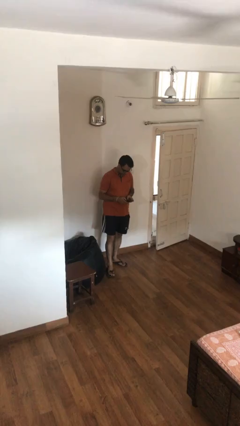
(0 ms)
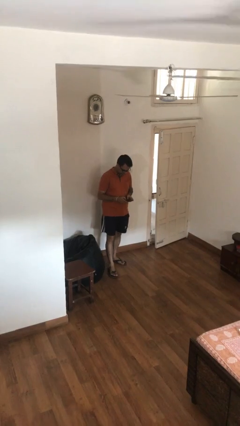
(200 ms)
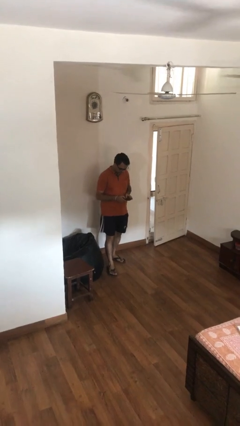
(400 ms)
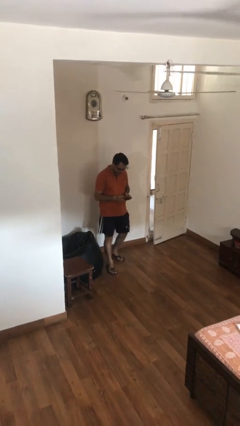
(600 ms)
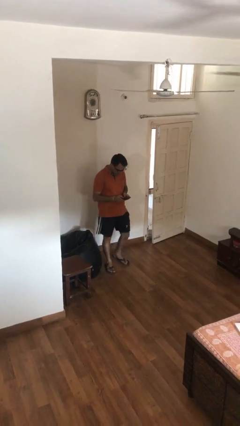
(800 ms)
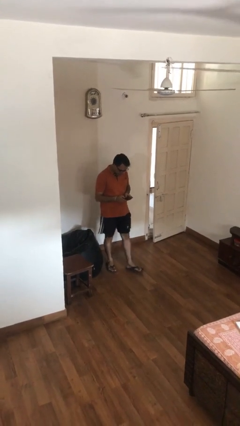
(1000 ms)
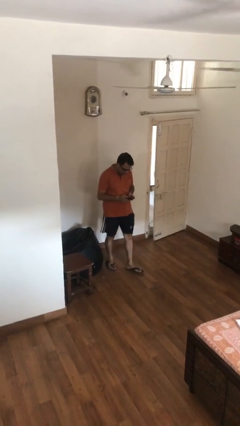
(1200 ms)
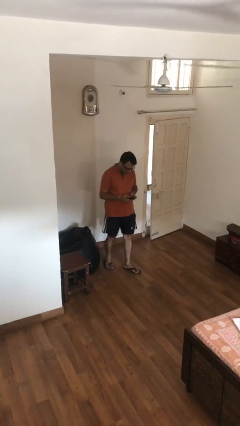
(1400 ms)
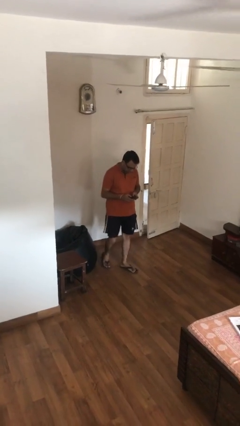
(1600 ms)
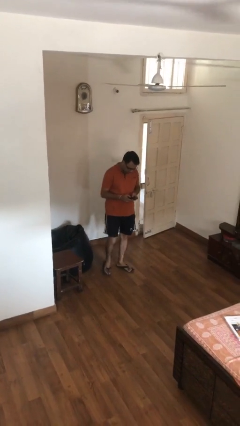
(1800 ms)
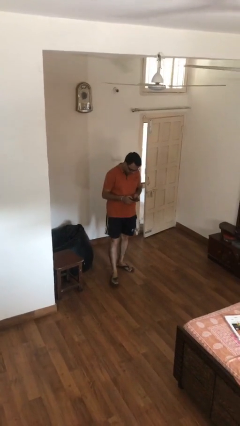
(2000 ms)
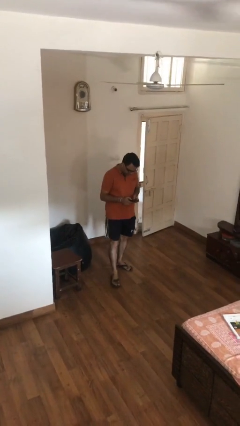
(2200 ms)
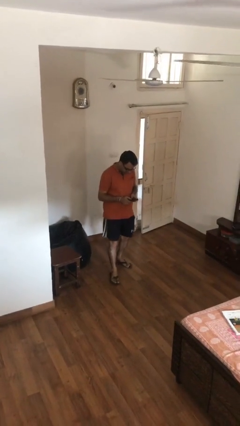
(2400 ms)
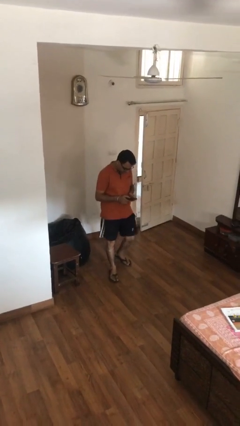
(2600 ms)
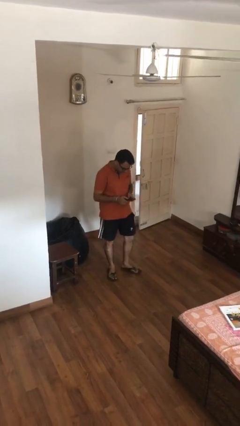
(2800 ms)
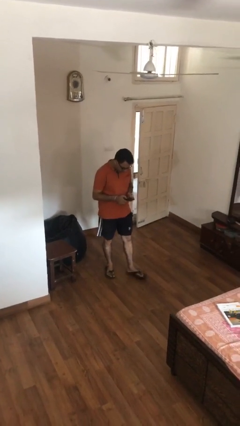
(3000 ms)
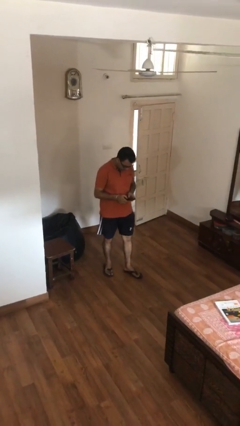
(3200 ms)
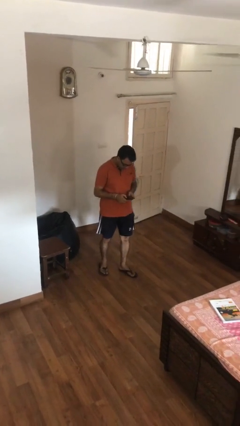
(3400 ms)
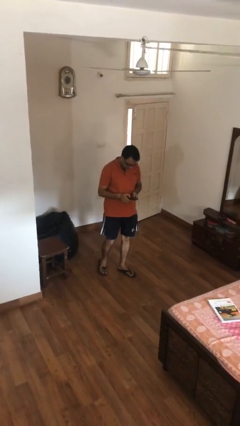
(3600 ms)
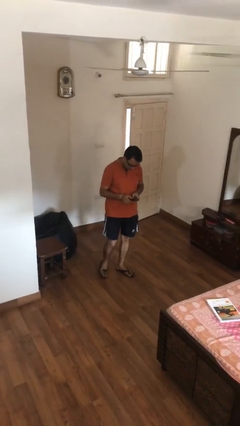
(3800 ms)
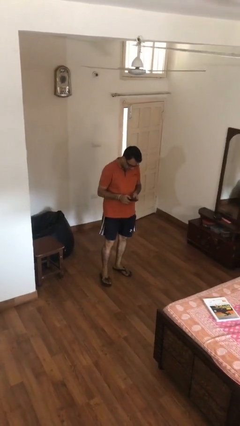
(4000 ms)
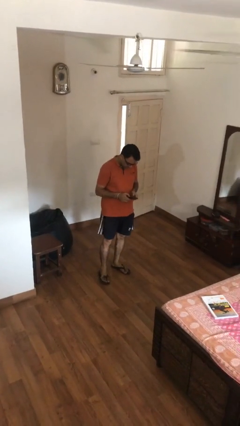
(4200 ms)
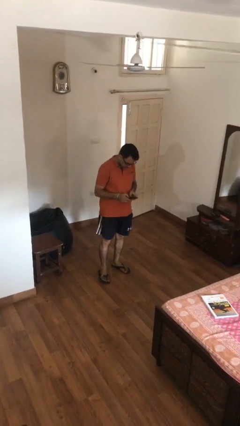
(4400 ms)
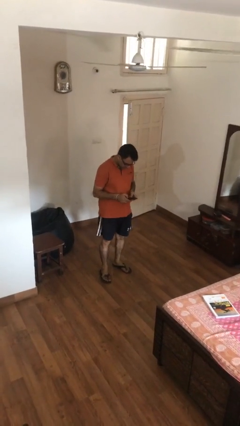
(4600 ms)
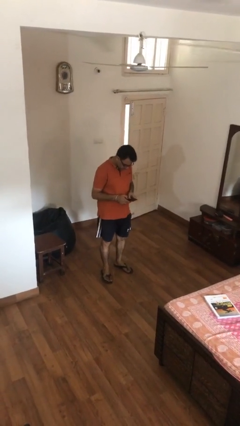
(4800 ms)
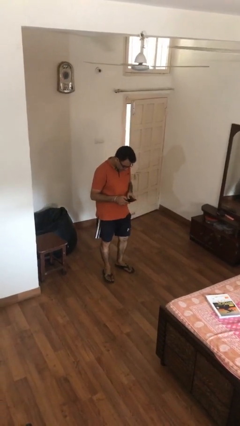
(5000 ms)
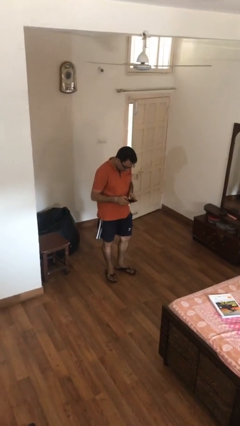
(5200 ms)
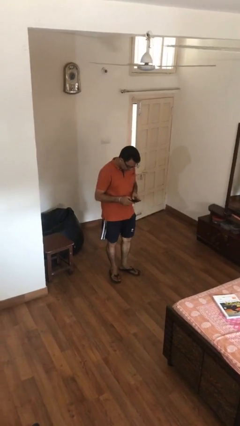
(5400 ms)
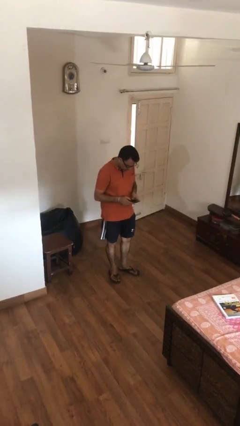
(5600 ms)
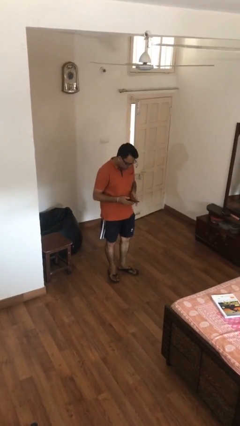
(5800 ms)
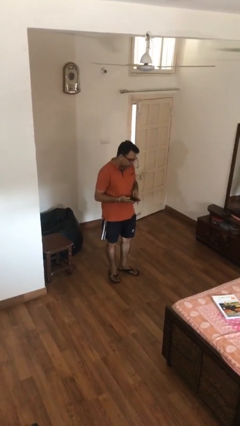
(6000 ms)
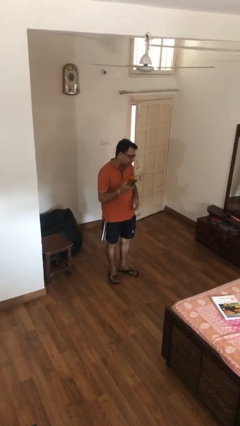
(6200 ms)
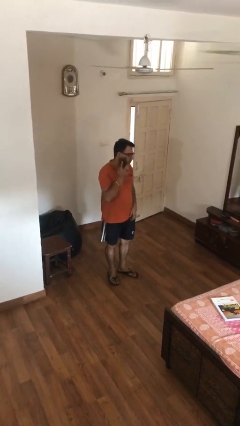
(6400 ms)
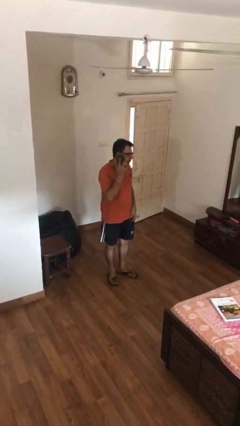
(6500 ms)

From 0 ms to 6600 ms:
person texts on phone

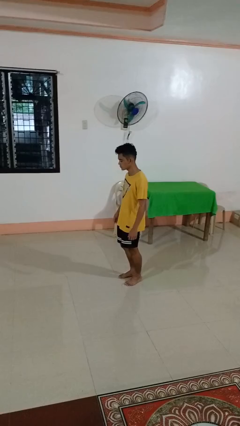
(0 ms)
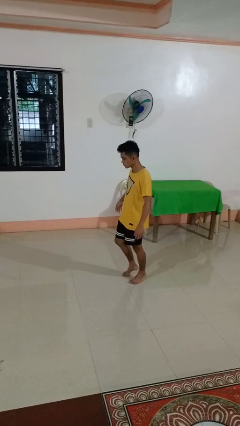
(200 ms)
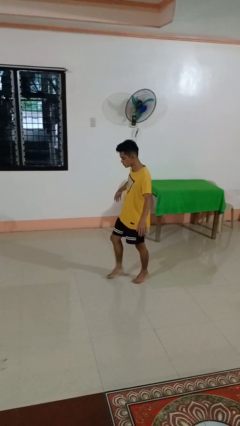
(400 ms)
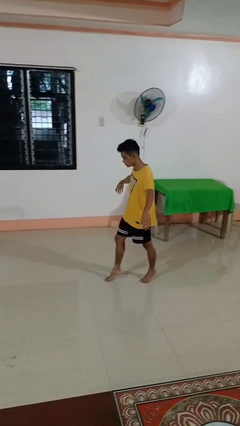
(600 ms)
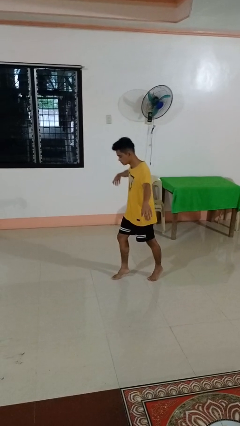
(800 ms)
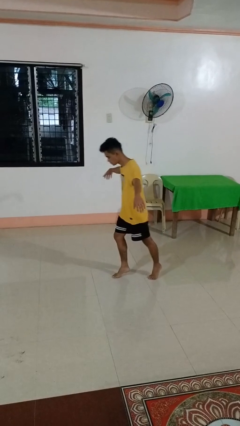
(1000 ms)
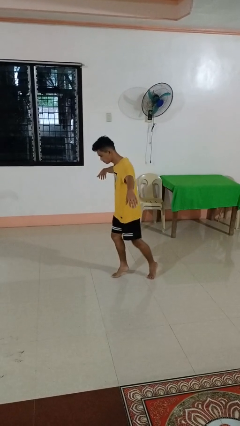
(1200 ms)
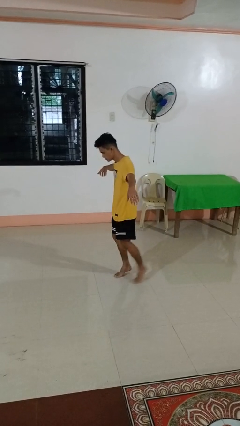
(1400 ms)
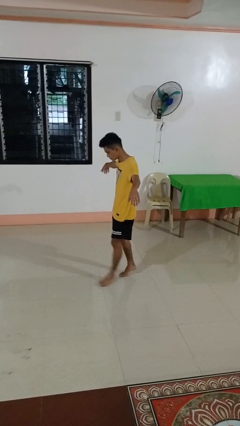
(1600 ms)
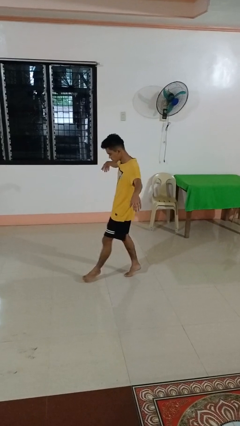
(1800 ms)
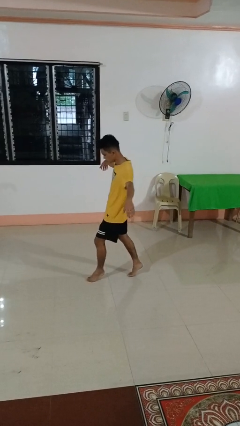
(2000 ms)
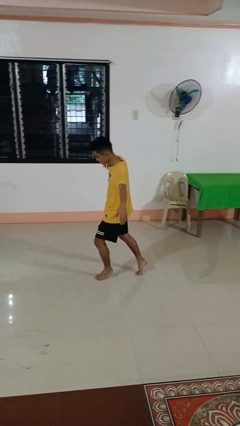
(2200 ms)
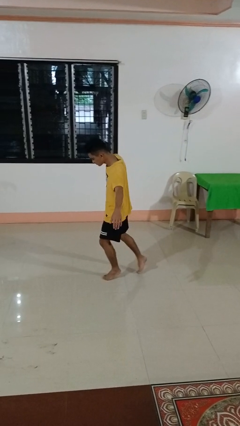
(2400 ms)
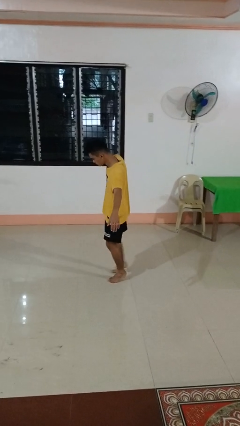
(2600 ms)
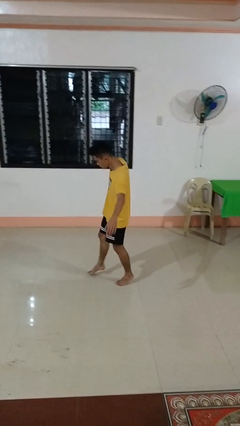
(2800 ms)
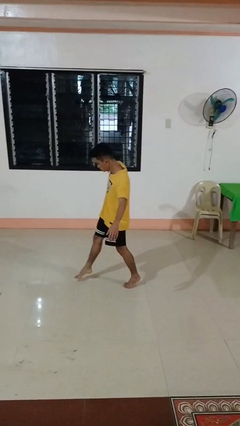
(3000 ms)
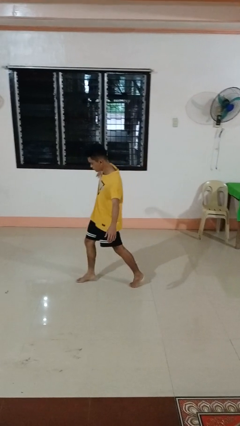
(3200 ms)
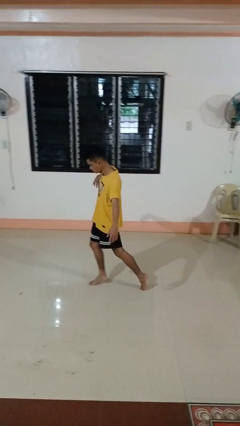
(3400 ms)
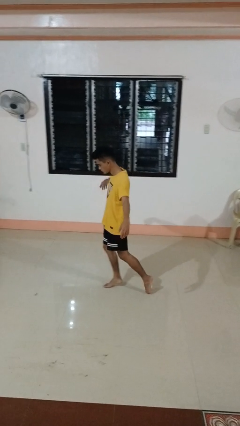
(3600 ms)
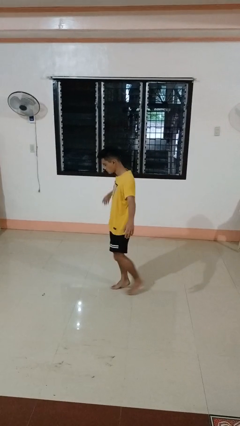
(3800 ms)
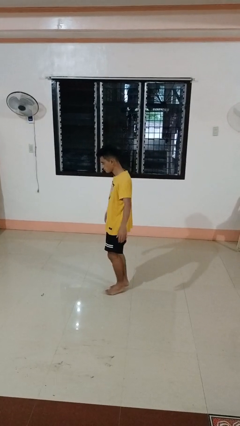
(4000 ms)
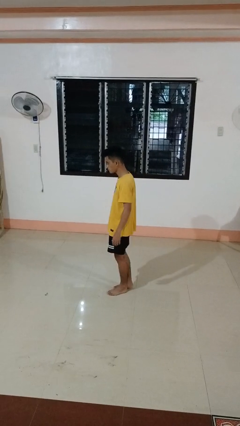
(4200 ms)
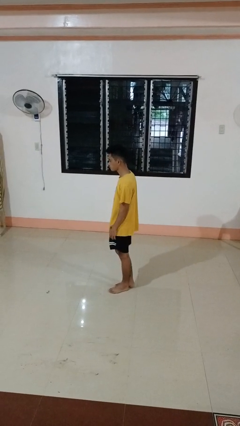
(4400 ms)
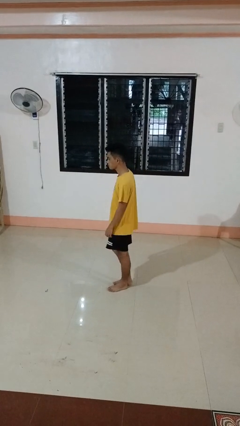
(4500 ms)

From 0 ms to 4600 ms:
person walks tiptoe

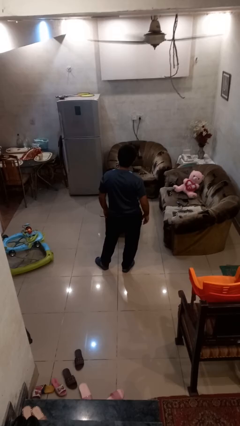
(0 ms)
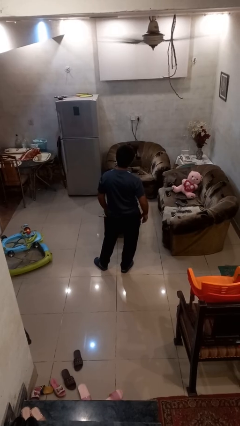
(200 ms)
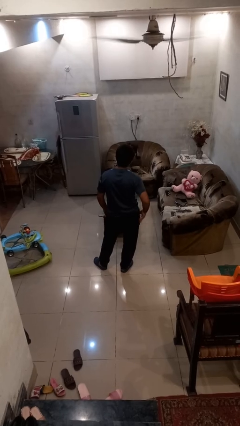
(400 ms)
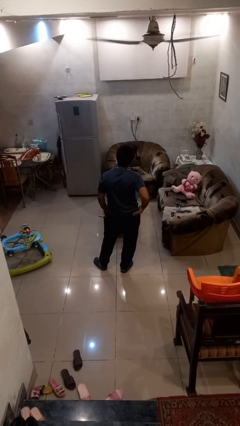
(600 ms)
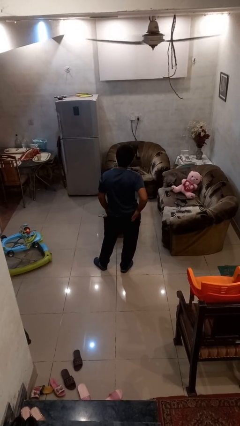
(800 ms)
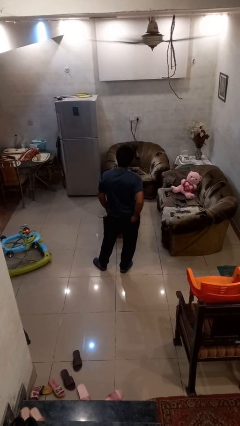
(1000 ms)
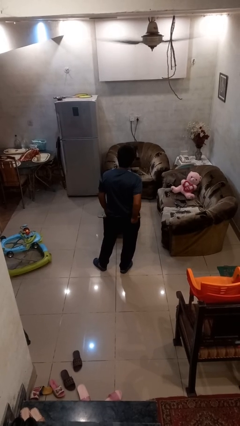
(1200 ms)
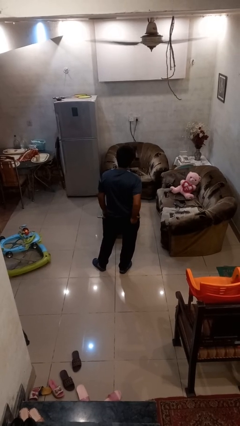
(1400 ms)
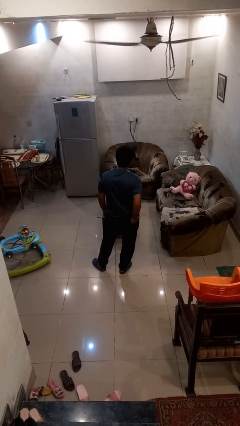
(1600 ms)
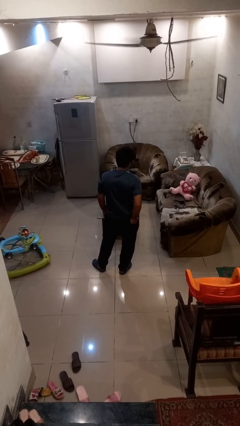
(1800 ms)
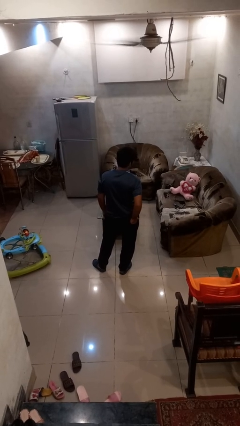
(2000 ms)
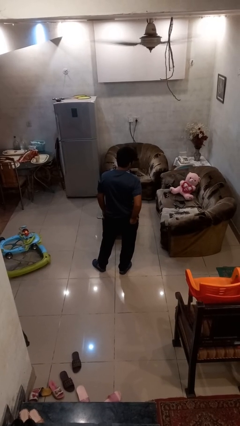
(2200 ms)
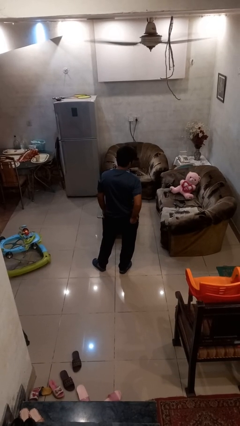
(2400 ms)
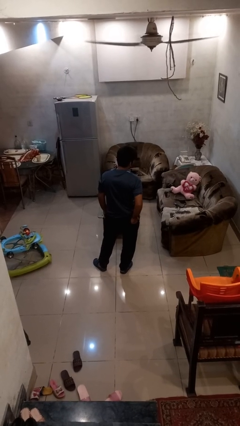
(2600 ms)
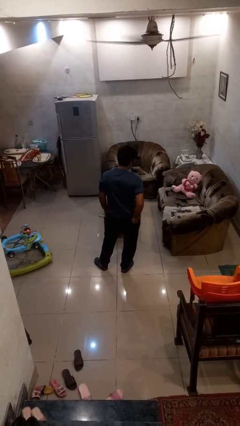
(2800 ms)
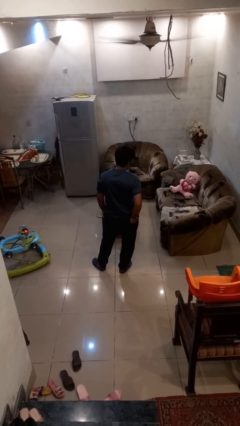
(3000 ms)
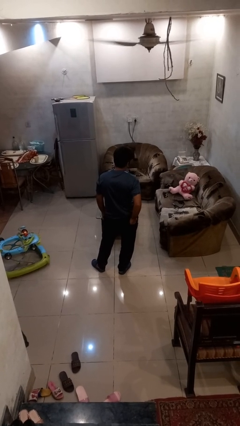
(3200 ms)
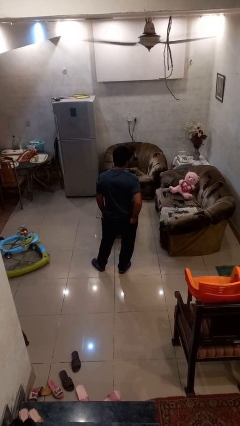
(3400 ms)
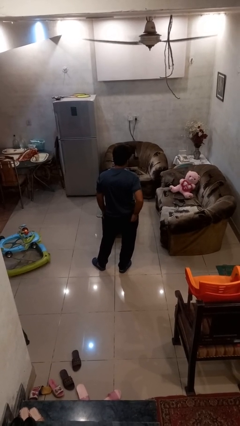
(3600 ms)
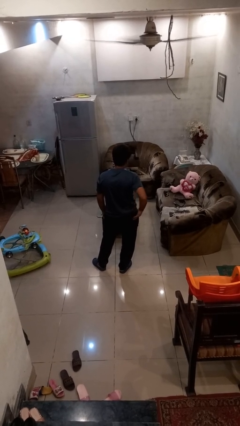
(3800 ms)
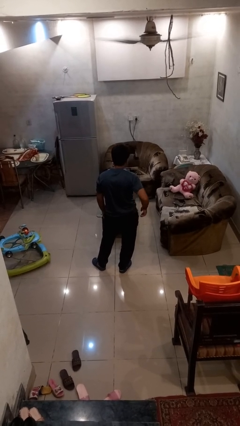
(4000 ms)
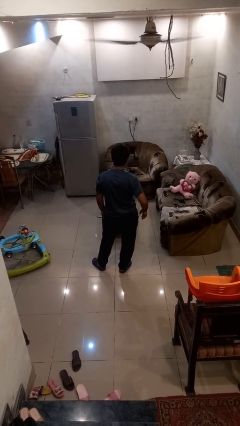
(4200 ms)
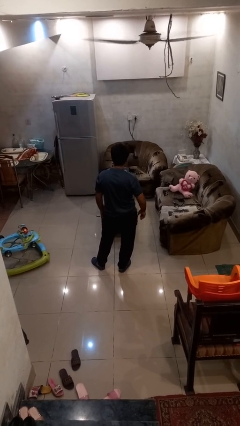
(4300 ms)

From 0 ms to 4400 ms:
person puts hands in back pockets

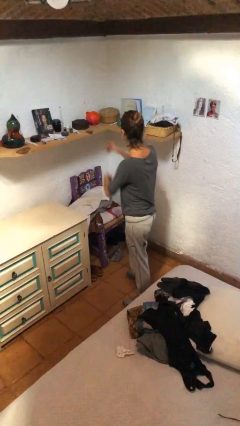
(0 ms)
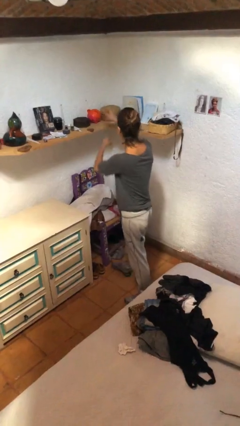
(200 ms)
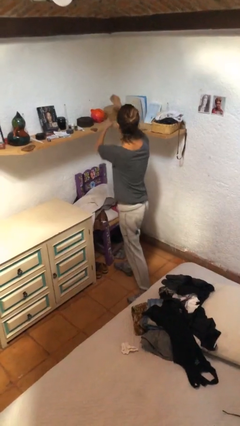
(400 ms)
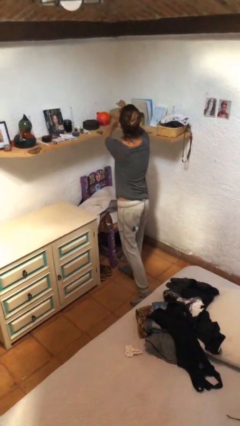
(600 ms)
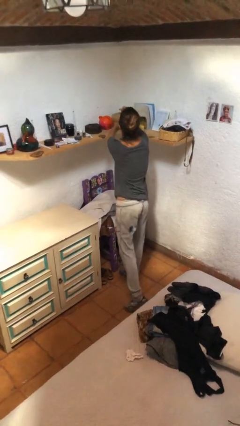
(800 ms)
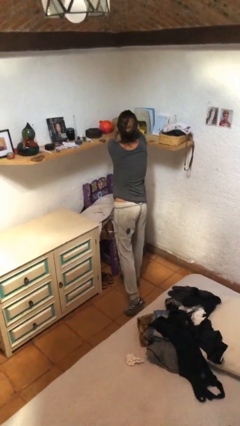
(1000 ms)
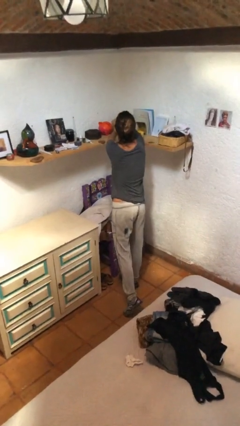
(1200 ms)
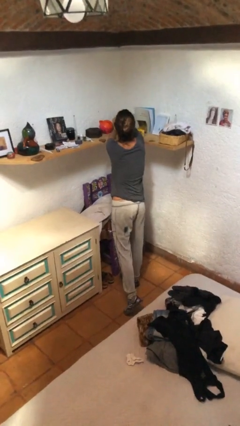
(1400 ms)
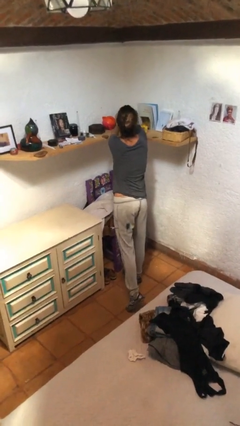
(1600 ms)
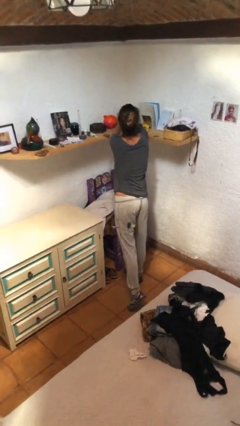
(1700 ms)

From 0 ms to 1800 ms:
person picks up object from shelf

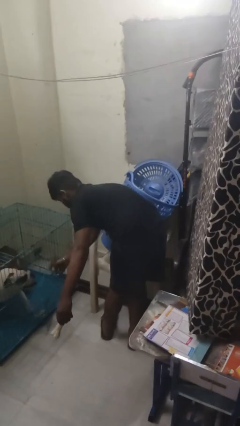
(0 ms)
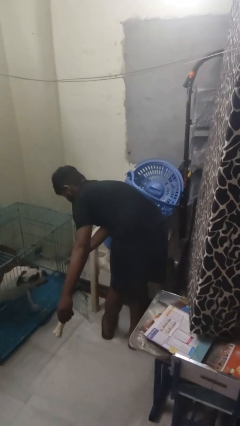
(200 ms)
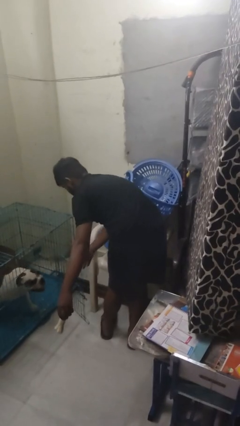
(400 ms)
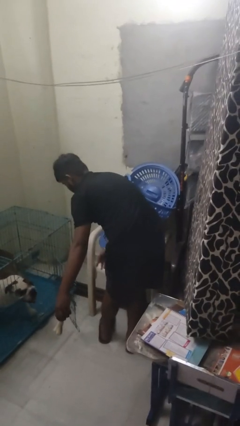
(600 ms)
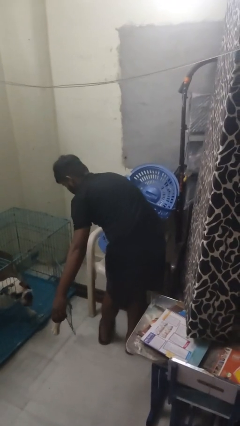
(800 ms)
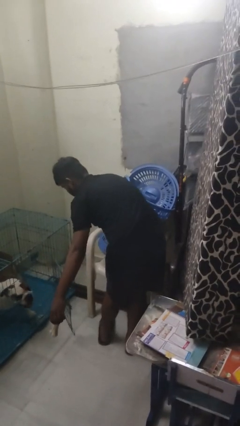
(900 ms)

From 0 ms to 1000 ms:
person uncrates dog
